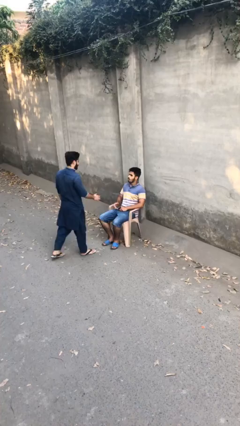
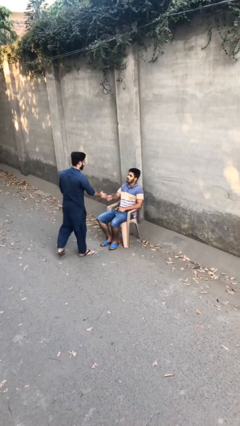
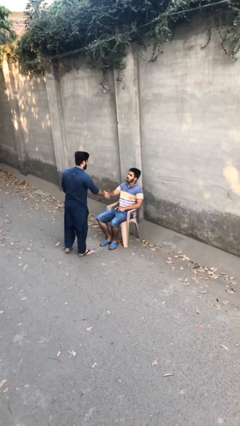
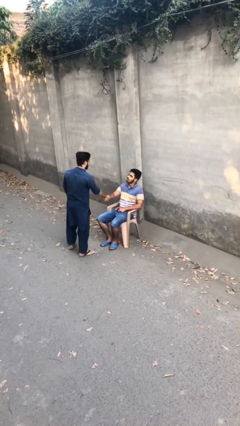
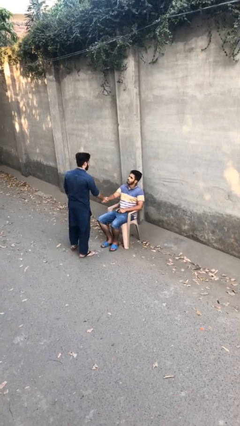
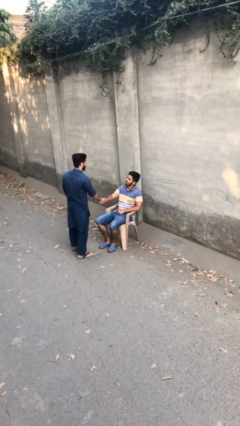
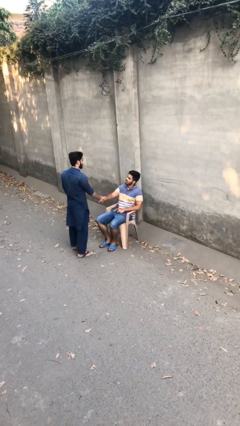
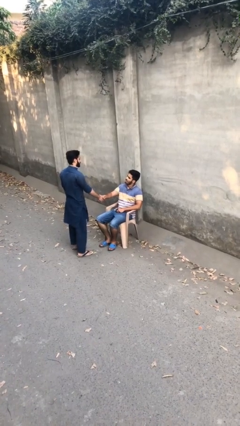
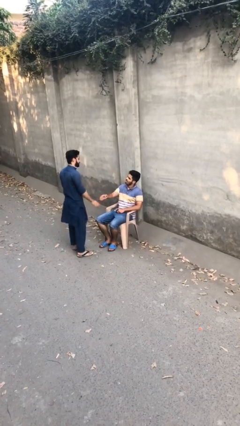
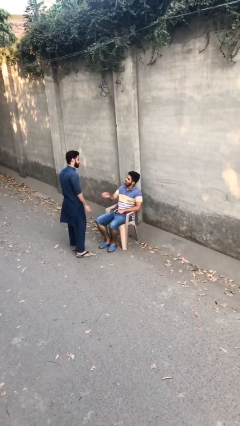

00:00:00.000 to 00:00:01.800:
person shakes hand

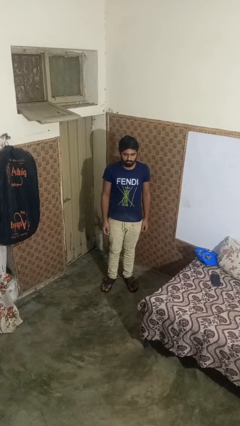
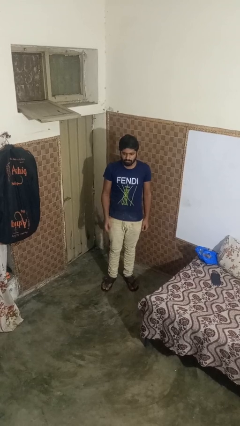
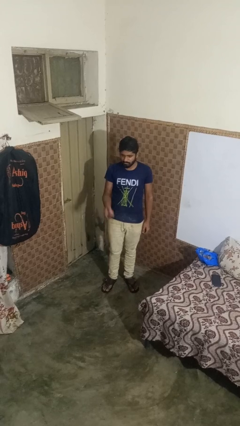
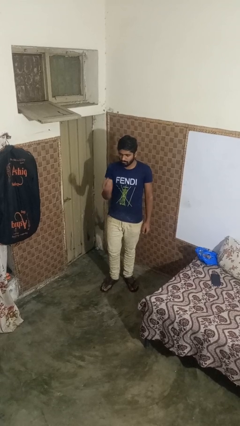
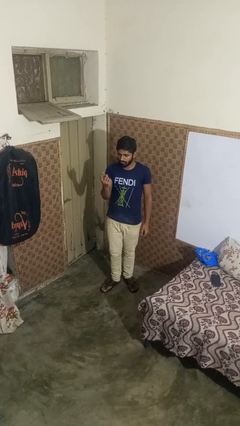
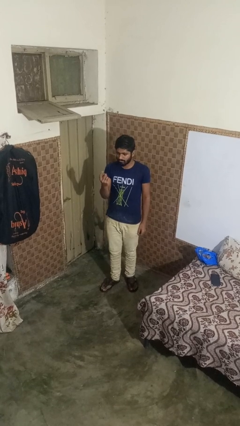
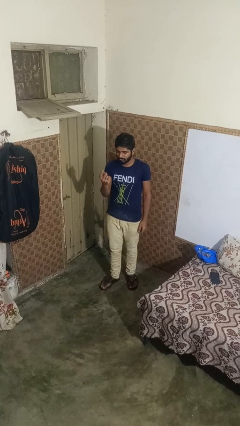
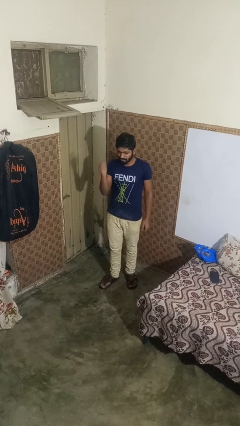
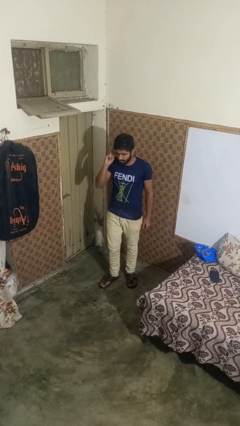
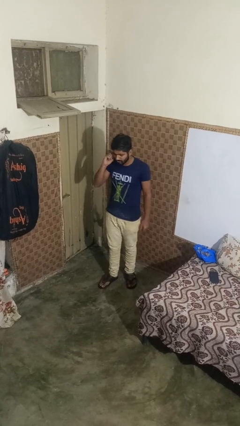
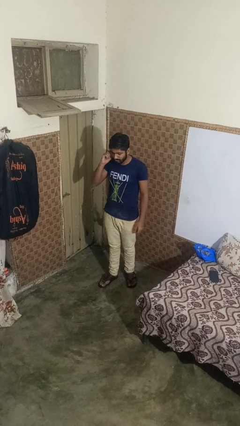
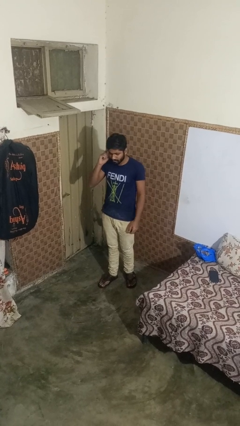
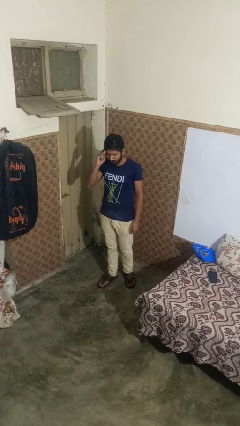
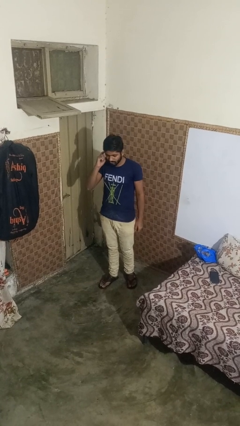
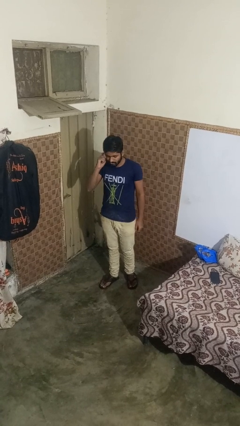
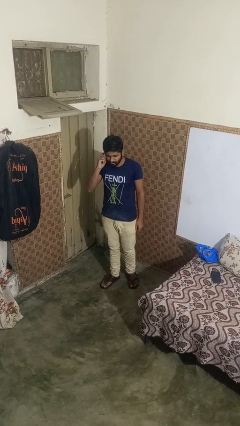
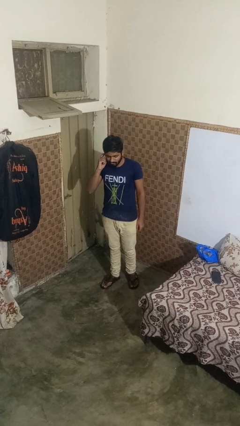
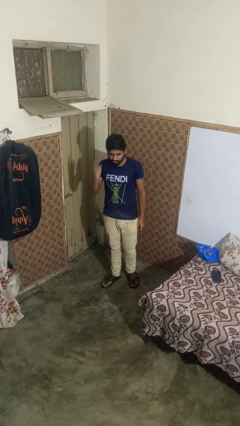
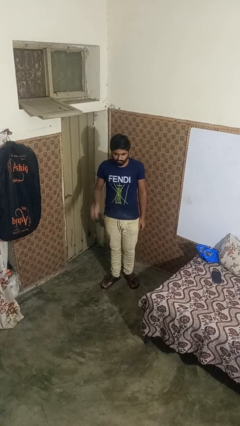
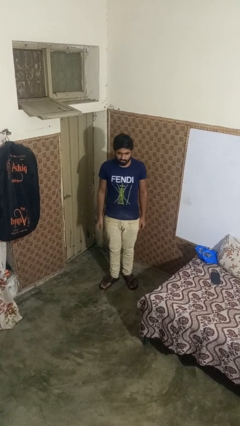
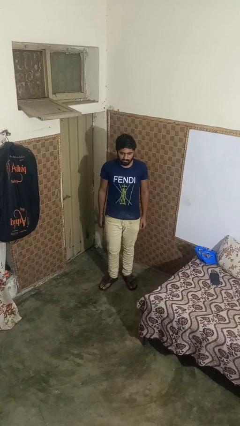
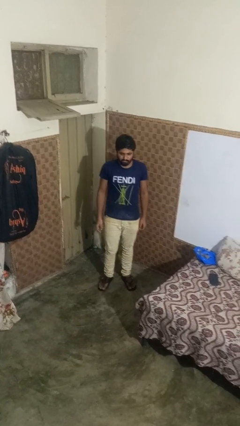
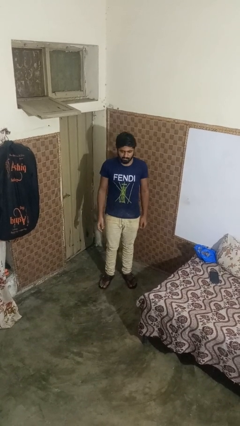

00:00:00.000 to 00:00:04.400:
person gestures listen closely

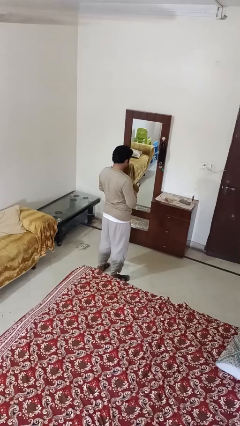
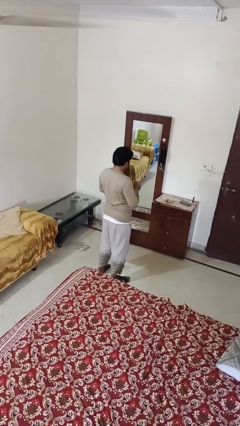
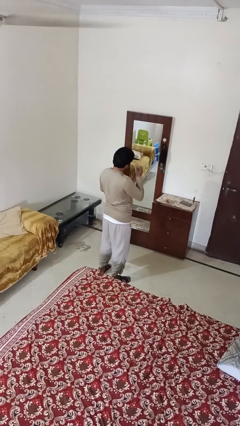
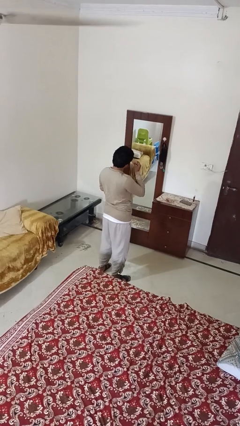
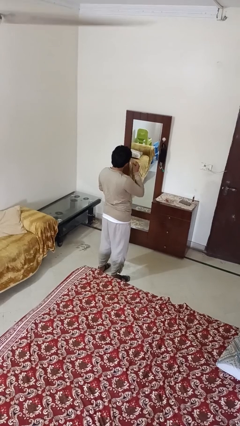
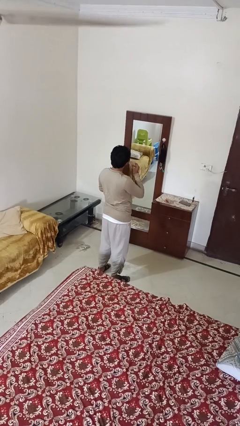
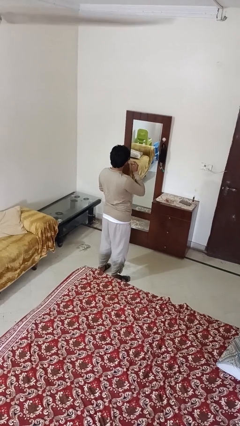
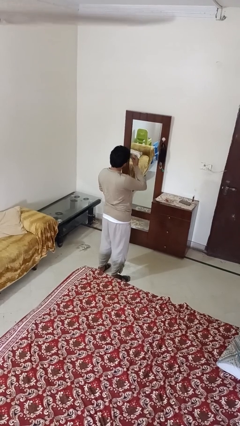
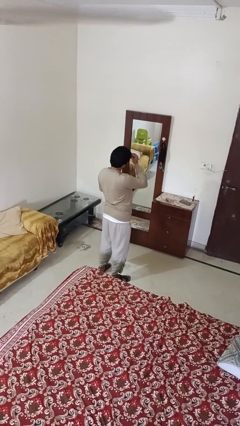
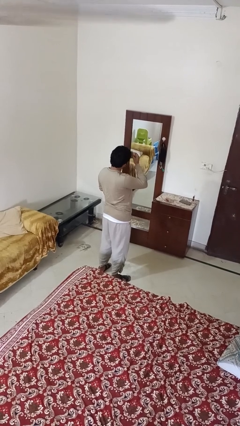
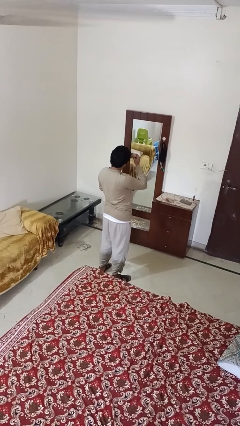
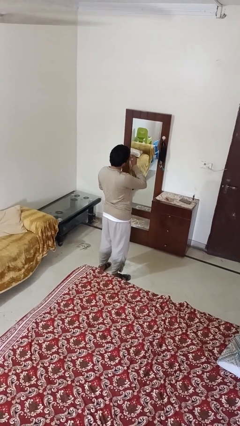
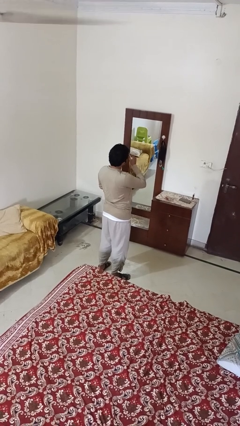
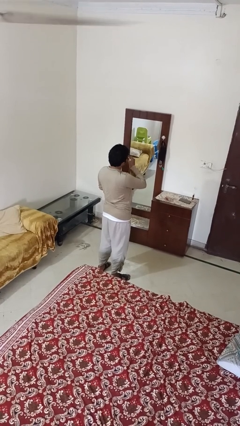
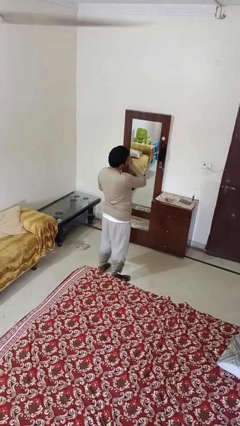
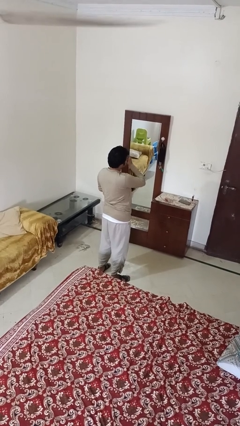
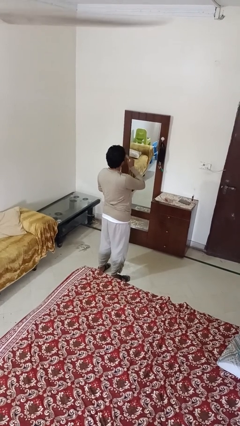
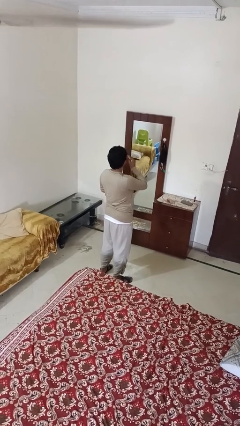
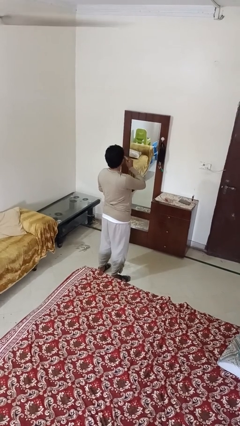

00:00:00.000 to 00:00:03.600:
person applies foundation makeup

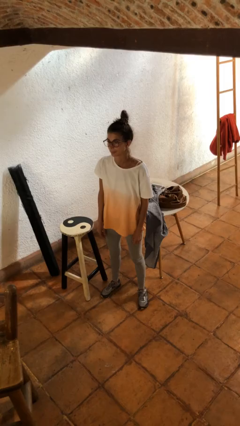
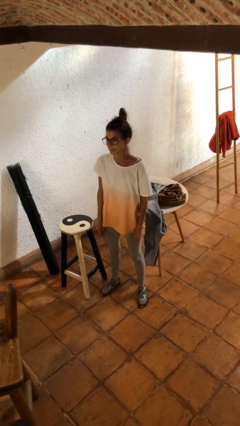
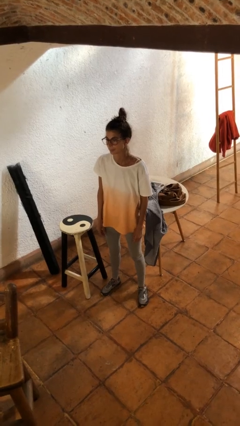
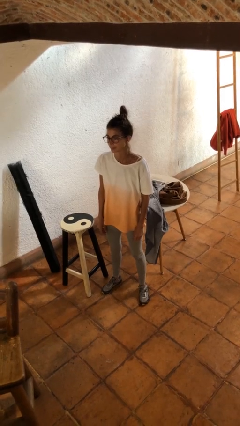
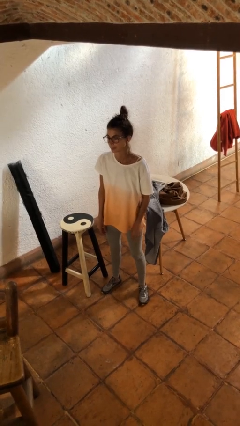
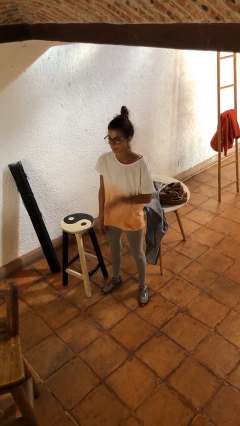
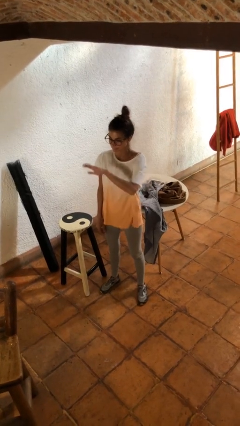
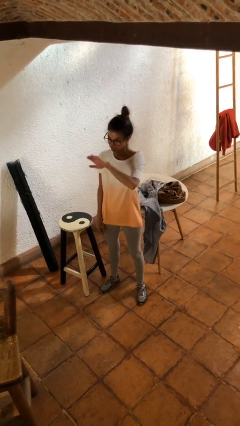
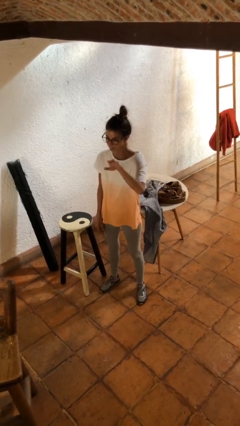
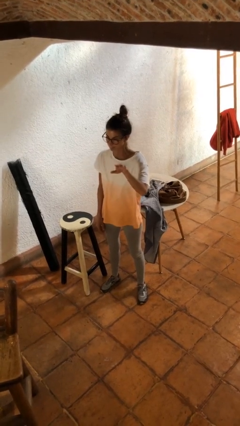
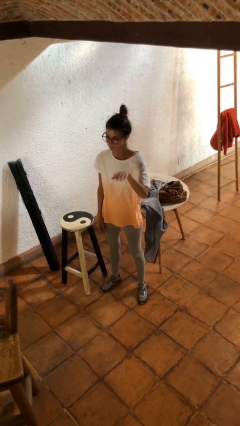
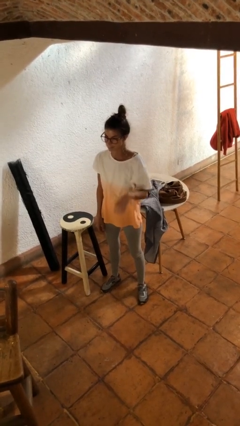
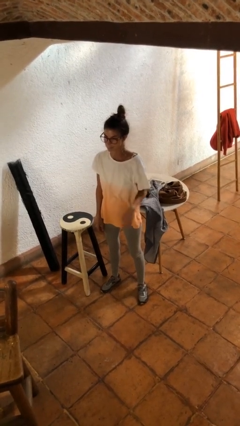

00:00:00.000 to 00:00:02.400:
person gestures swipe left

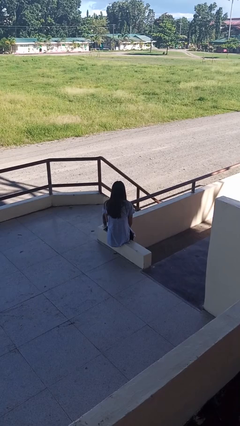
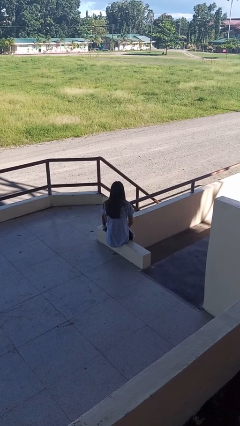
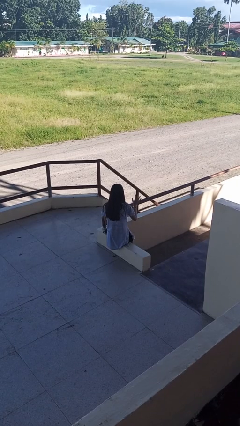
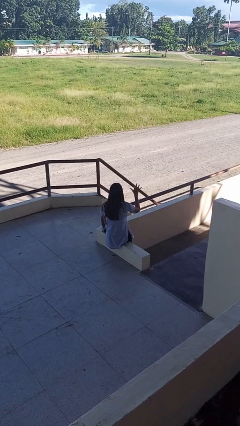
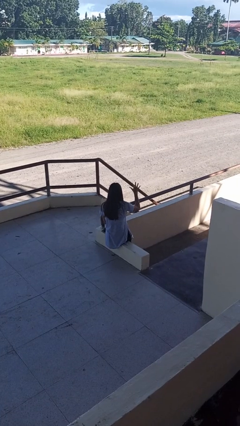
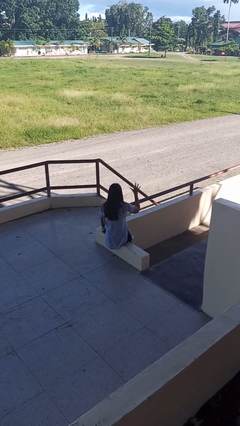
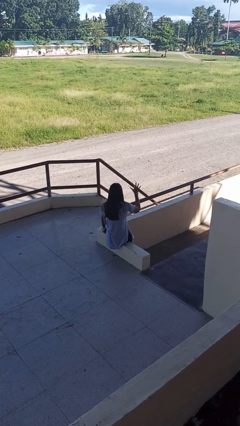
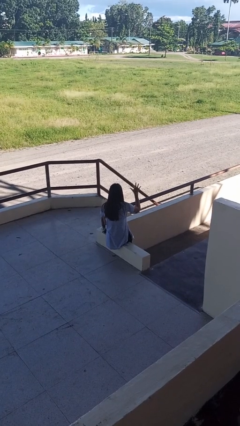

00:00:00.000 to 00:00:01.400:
person gestures number five

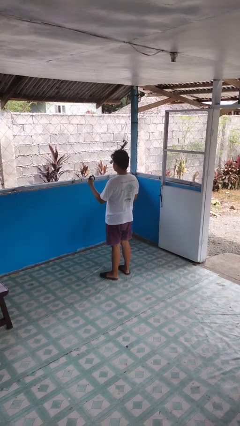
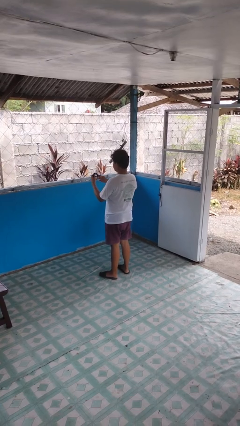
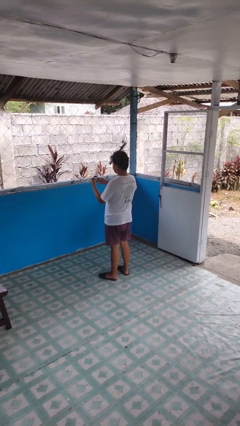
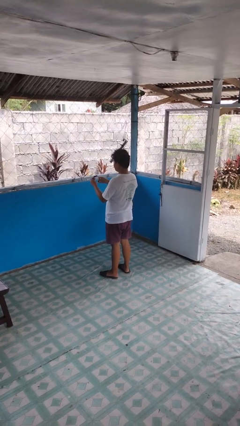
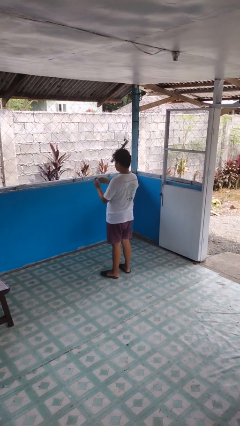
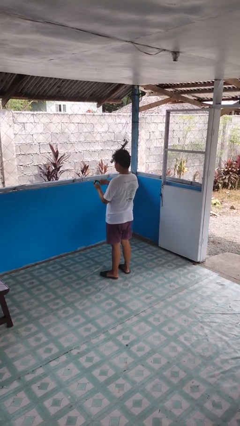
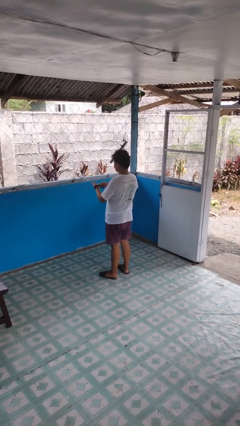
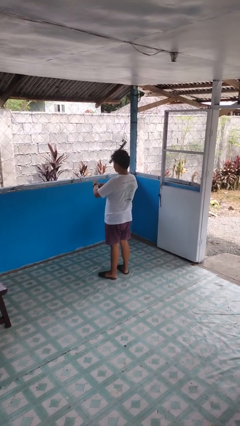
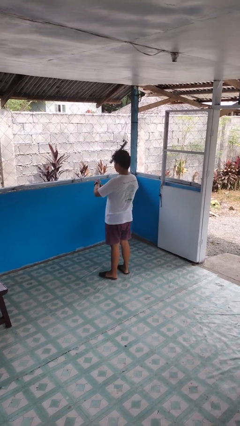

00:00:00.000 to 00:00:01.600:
person puts on wristwatch

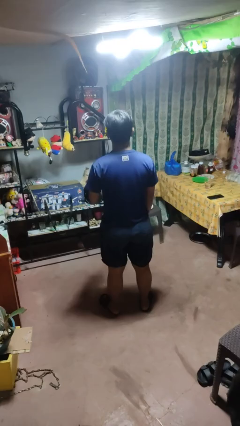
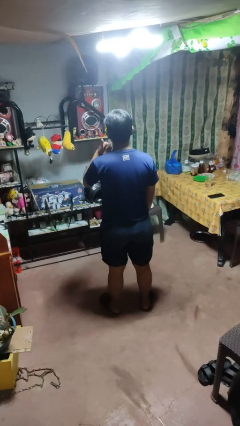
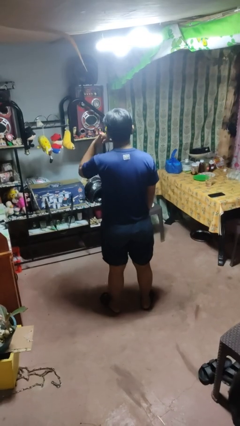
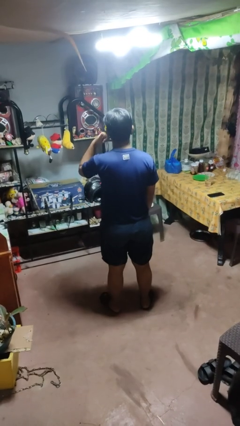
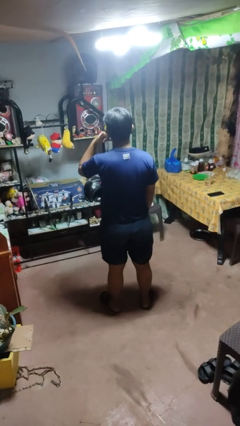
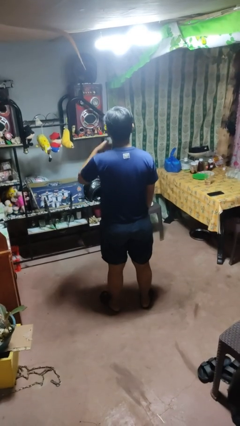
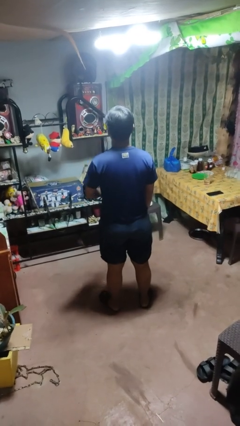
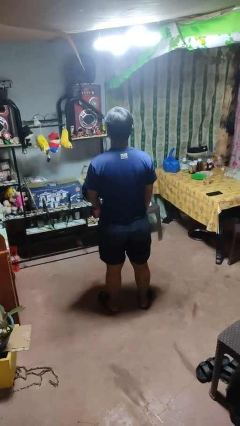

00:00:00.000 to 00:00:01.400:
person gestures call me

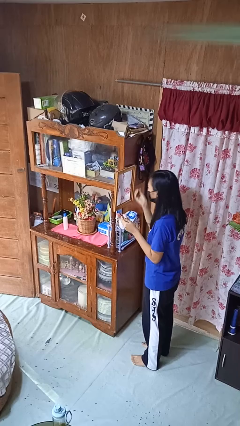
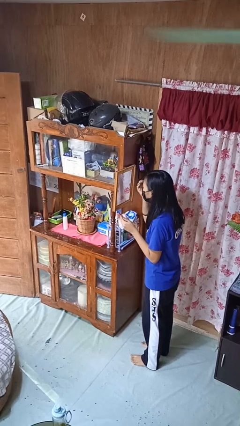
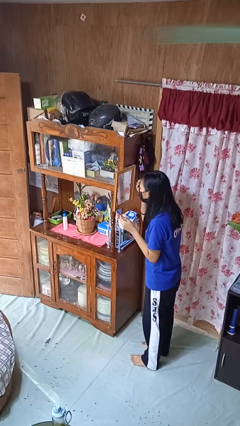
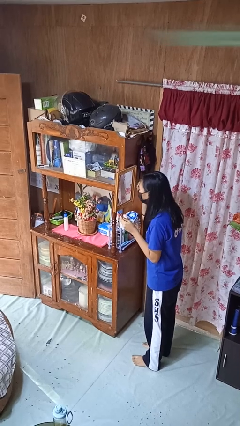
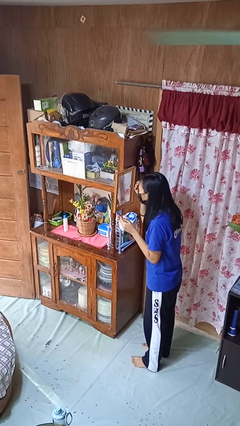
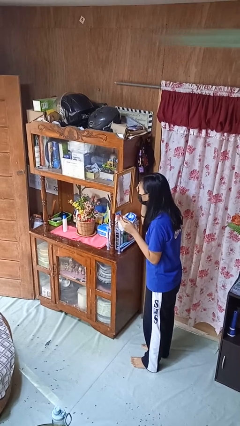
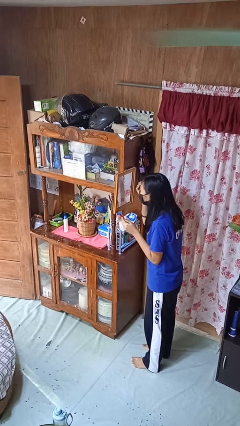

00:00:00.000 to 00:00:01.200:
person applies eye makeup
